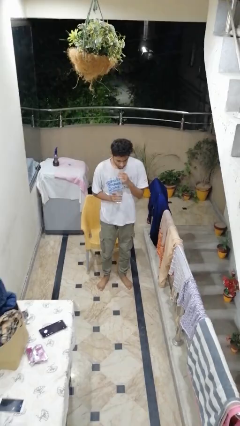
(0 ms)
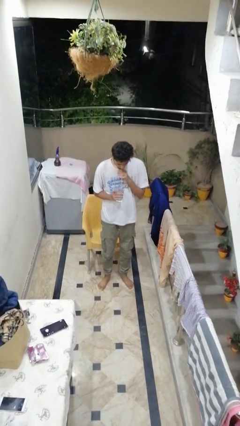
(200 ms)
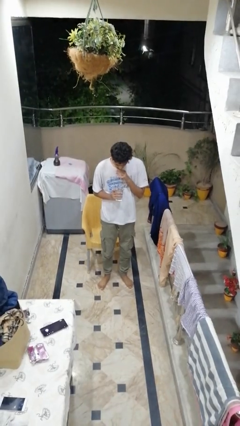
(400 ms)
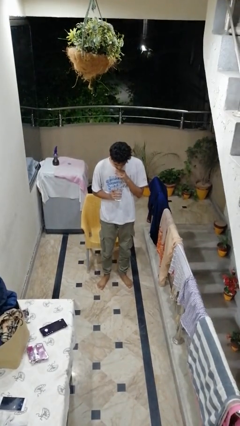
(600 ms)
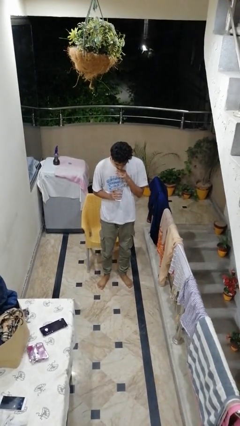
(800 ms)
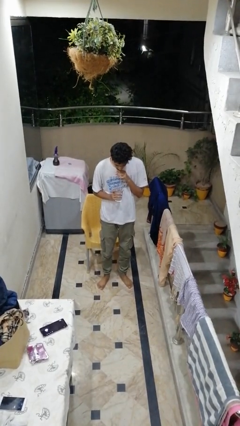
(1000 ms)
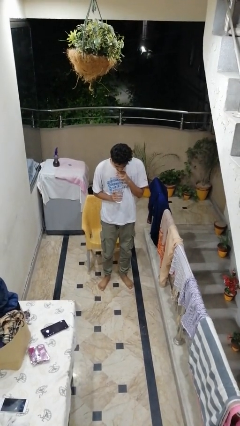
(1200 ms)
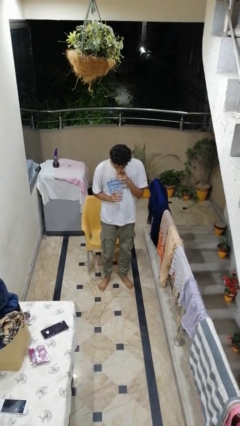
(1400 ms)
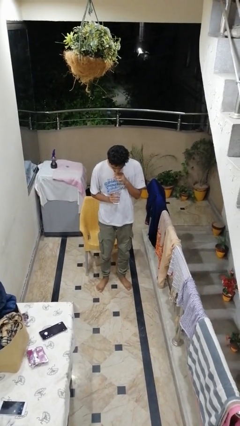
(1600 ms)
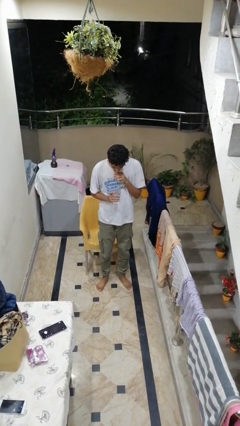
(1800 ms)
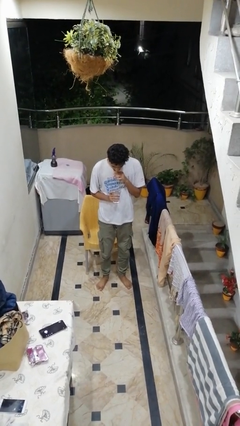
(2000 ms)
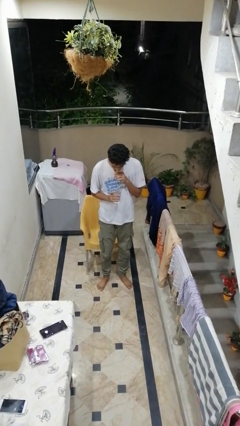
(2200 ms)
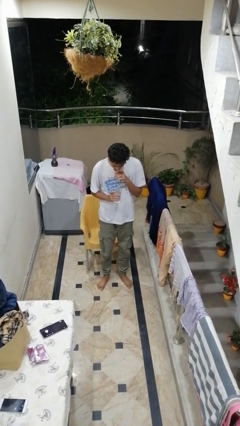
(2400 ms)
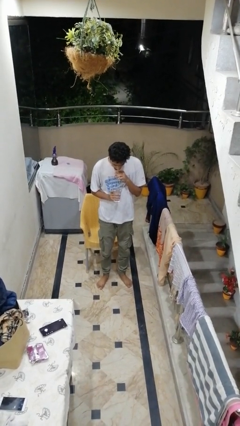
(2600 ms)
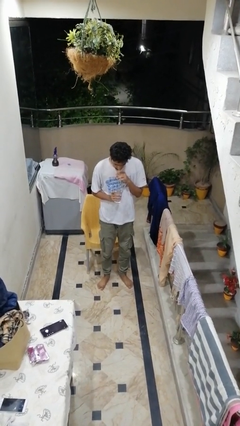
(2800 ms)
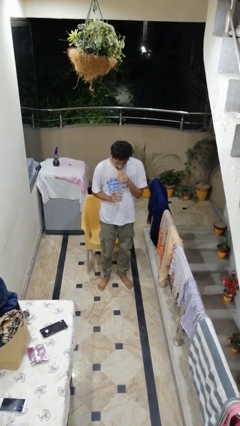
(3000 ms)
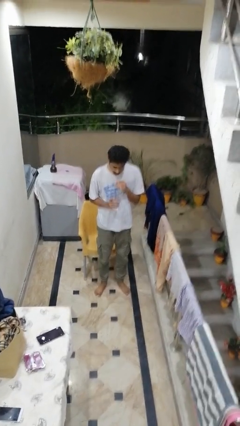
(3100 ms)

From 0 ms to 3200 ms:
person drinks from straw

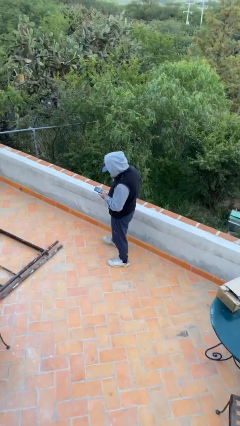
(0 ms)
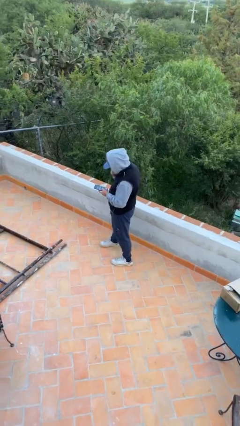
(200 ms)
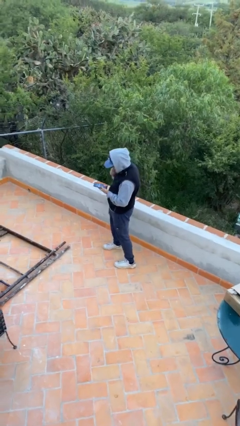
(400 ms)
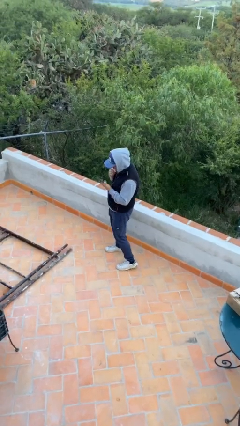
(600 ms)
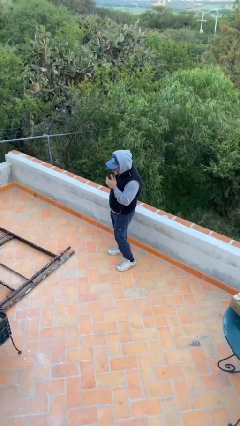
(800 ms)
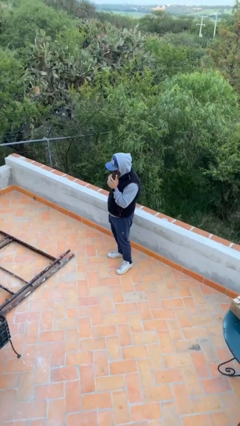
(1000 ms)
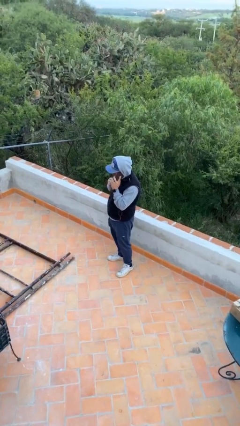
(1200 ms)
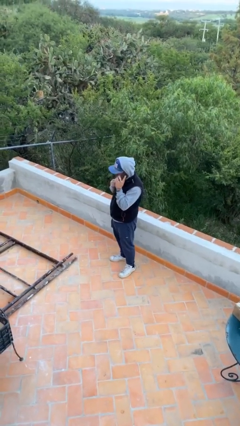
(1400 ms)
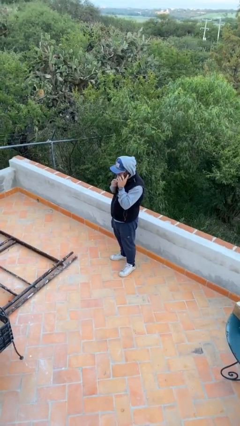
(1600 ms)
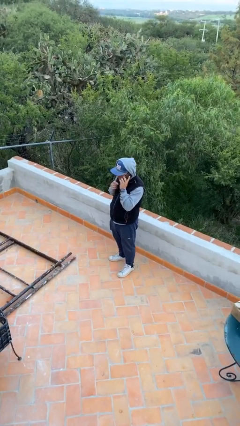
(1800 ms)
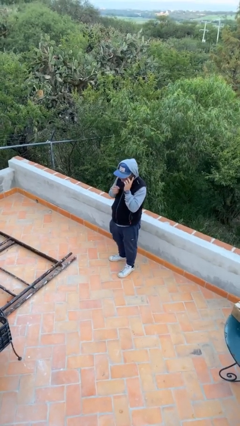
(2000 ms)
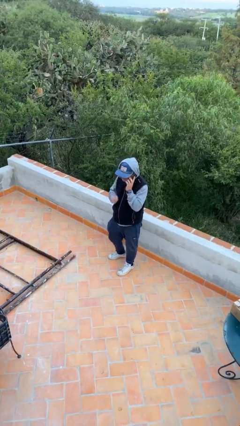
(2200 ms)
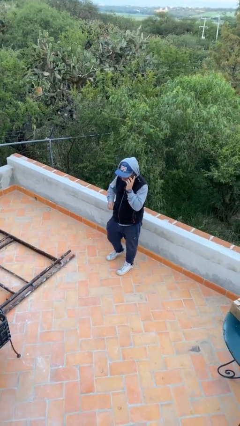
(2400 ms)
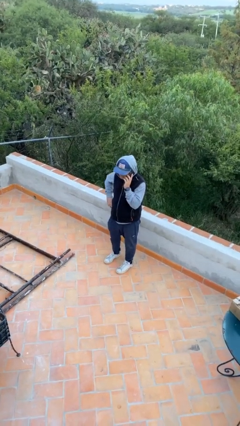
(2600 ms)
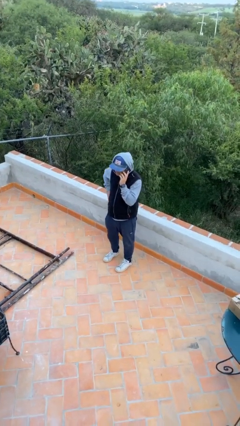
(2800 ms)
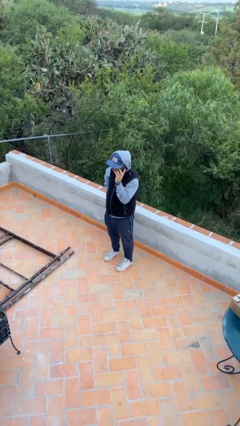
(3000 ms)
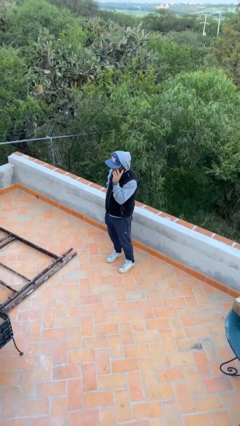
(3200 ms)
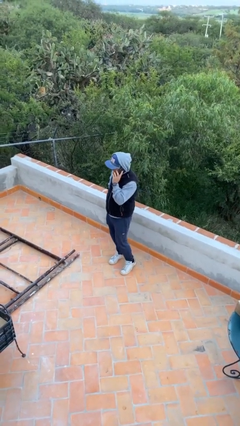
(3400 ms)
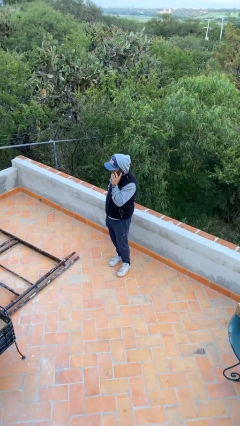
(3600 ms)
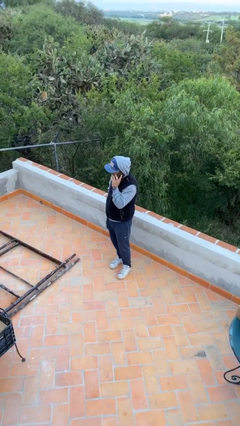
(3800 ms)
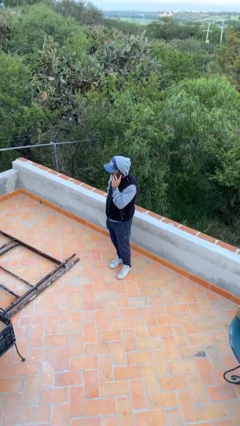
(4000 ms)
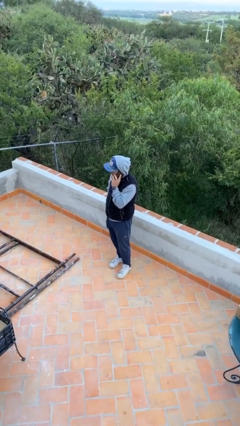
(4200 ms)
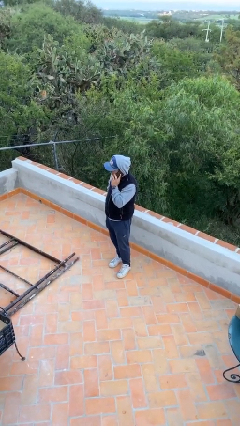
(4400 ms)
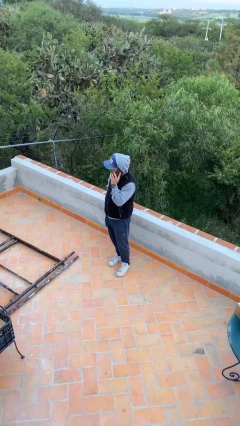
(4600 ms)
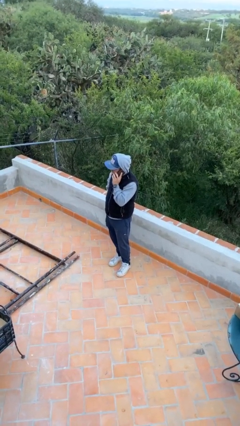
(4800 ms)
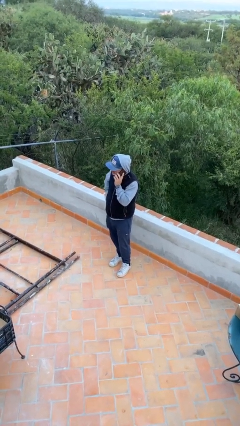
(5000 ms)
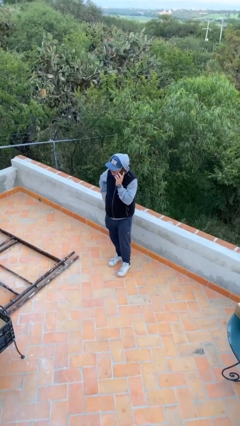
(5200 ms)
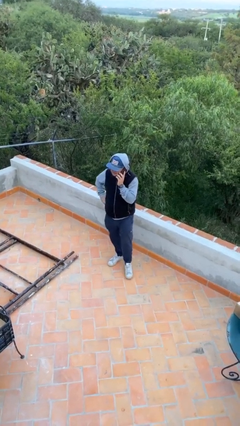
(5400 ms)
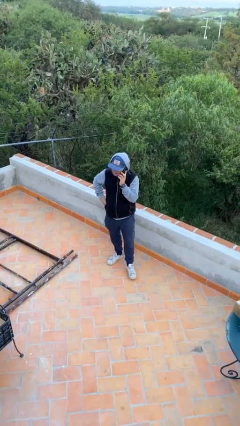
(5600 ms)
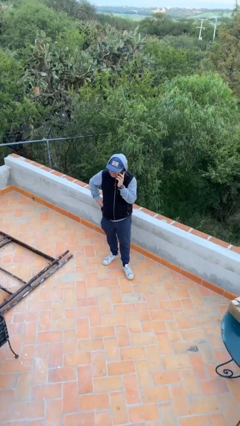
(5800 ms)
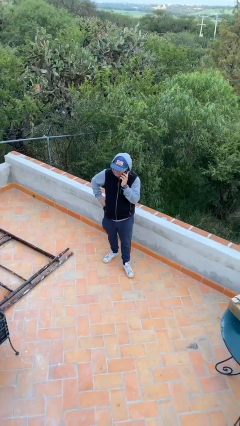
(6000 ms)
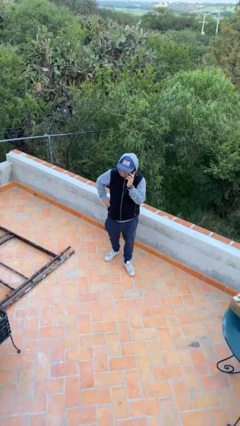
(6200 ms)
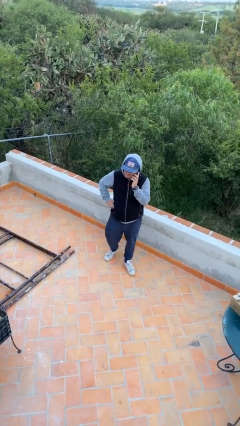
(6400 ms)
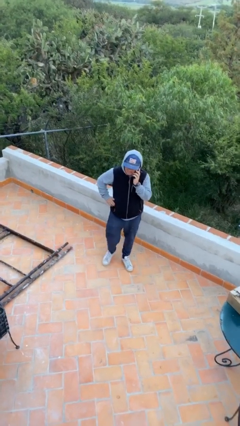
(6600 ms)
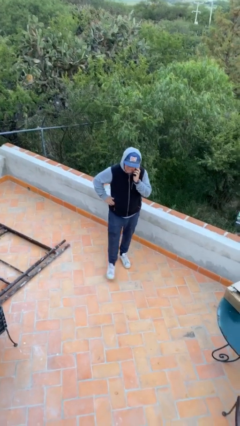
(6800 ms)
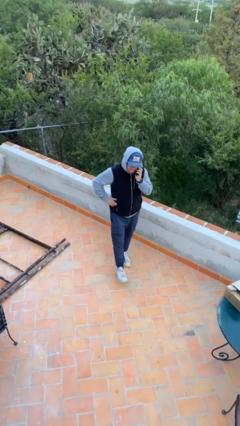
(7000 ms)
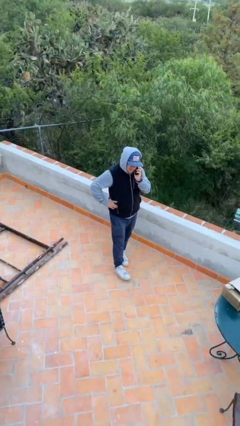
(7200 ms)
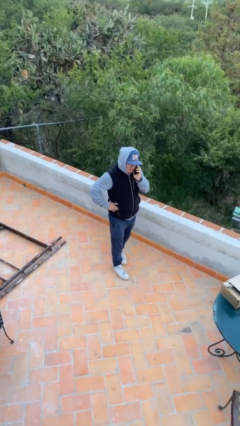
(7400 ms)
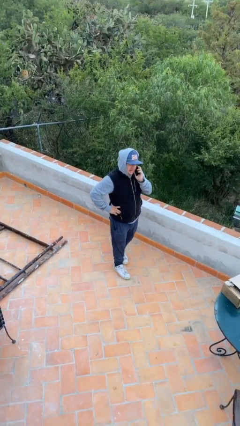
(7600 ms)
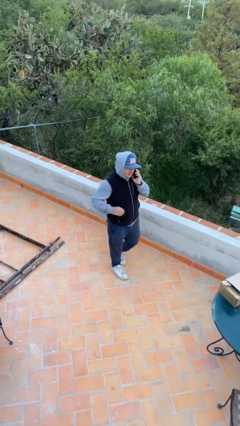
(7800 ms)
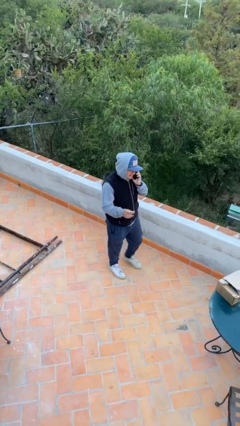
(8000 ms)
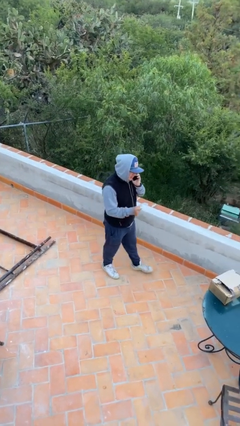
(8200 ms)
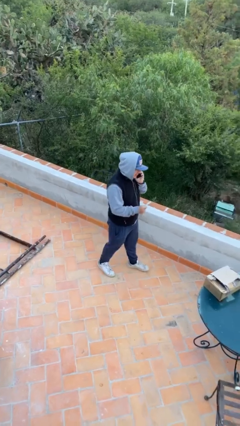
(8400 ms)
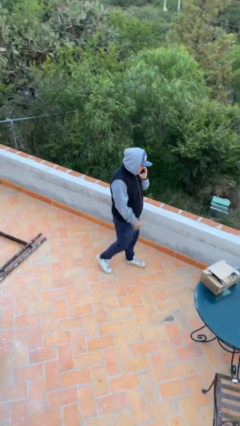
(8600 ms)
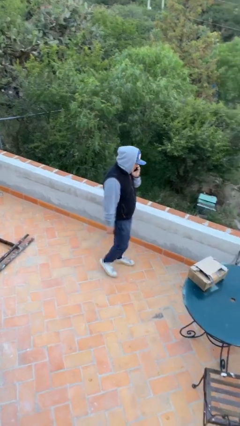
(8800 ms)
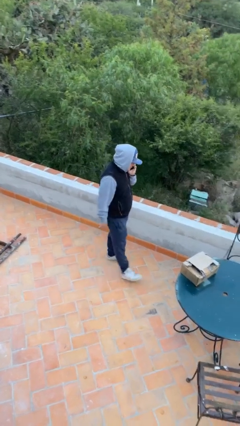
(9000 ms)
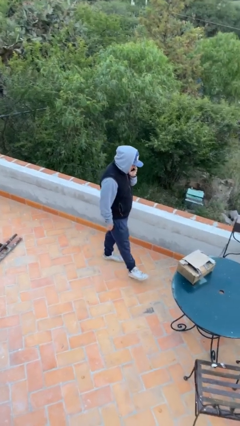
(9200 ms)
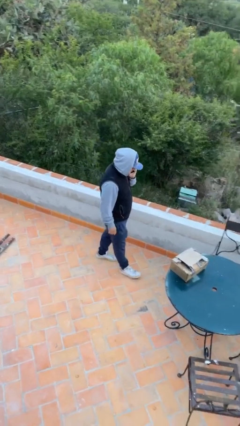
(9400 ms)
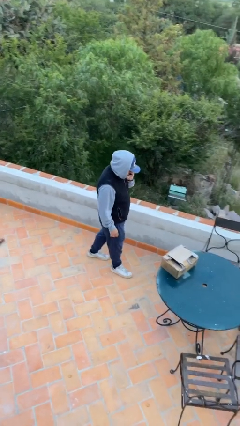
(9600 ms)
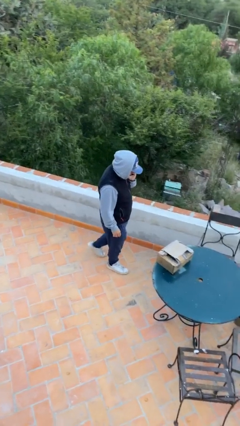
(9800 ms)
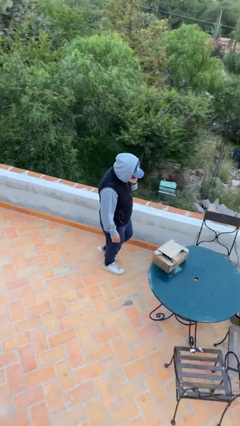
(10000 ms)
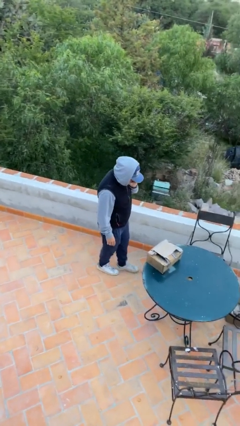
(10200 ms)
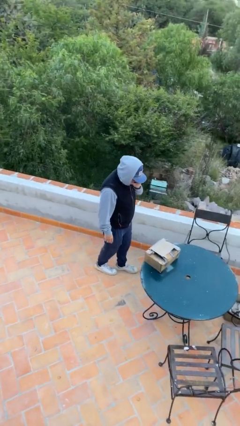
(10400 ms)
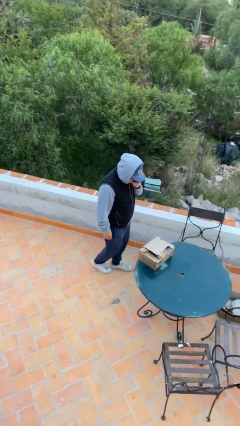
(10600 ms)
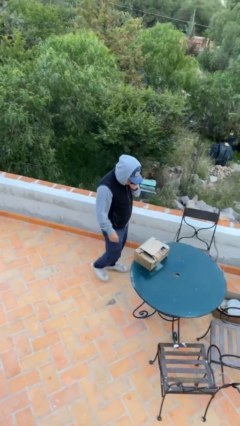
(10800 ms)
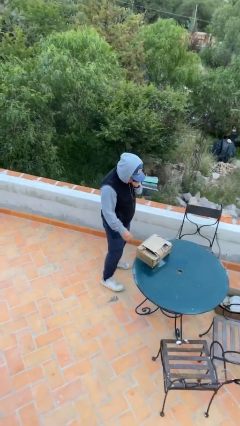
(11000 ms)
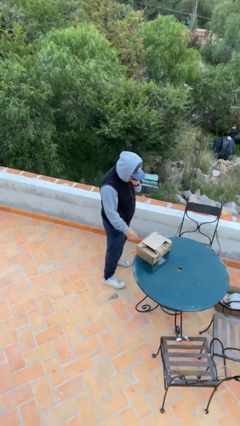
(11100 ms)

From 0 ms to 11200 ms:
person talks on phone

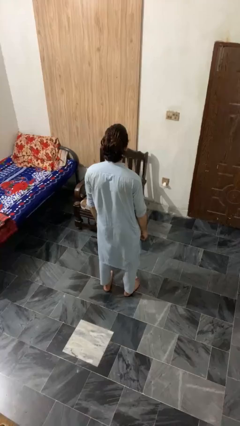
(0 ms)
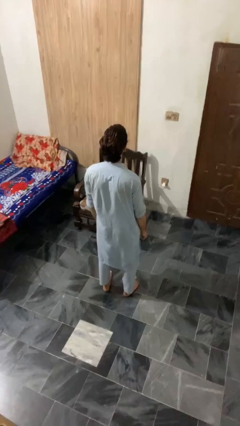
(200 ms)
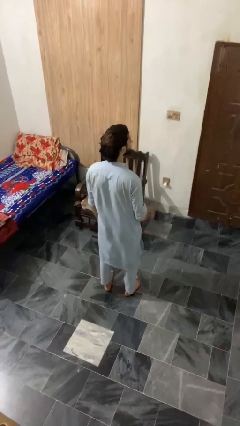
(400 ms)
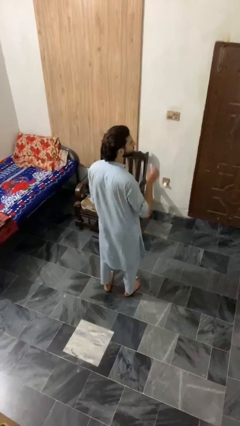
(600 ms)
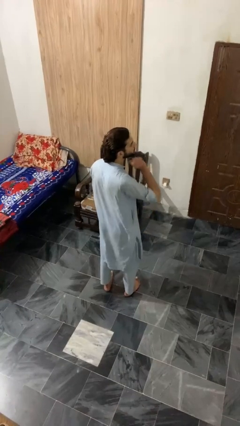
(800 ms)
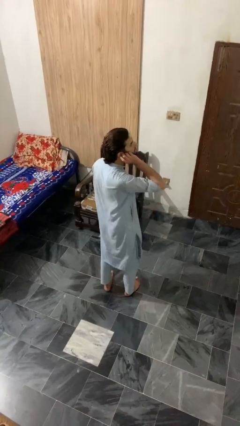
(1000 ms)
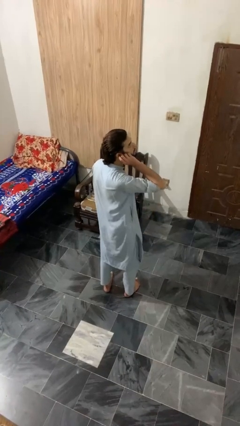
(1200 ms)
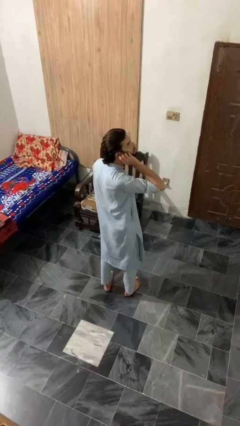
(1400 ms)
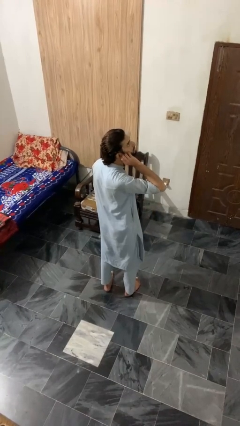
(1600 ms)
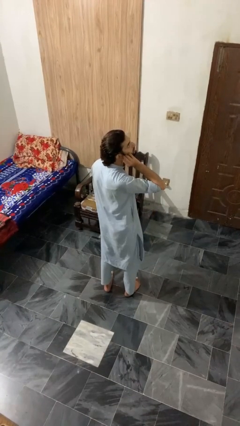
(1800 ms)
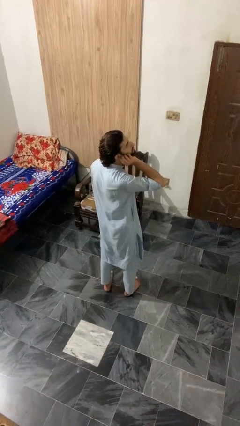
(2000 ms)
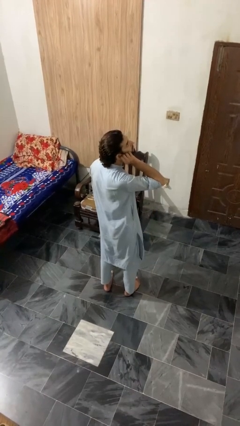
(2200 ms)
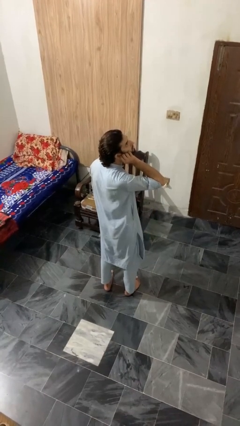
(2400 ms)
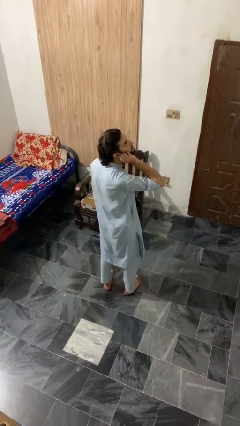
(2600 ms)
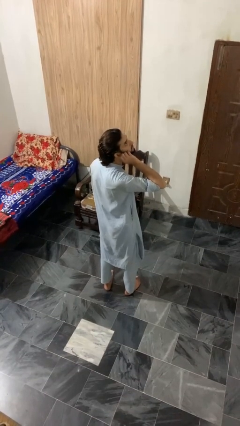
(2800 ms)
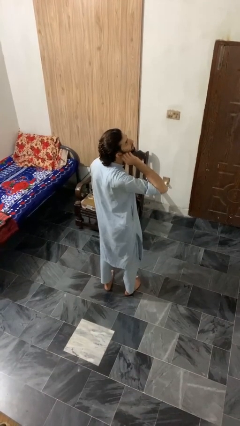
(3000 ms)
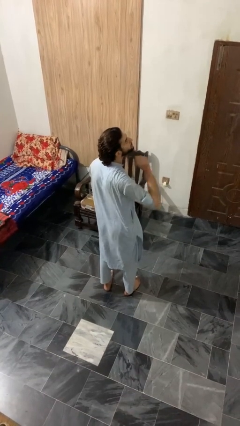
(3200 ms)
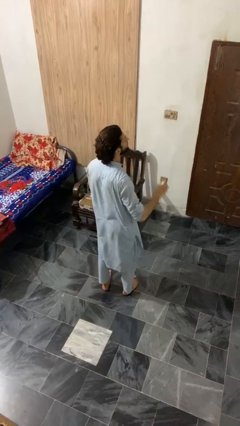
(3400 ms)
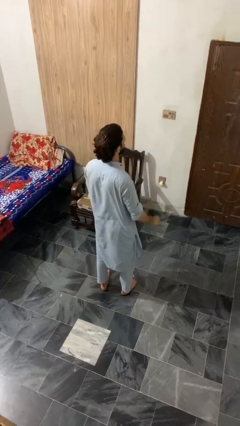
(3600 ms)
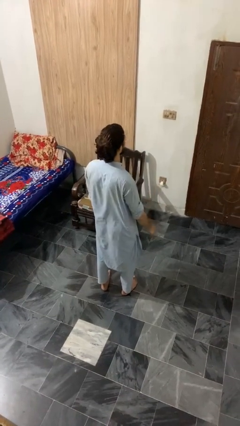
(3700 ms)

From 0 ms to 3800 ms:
person touches earlobe
